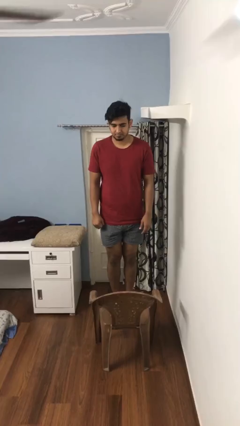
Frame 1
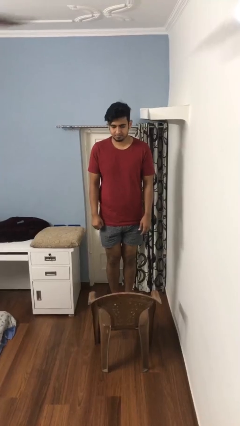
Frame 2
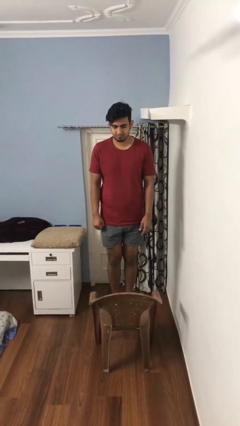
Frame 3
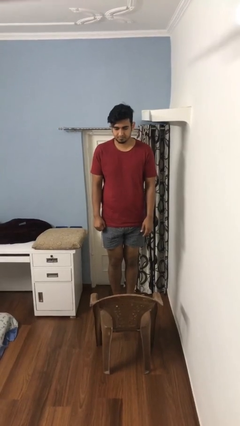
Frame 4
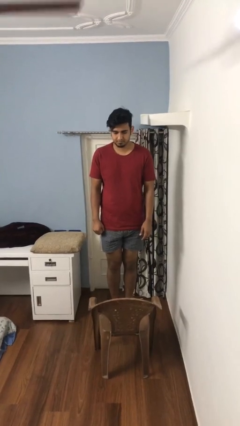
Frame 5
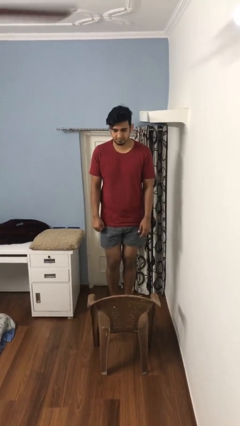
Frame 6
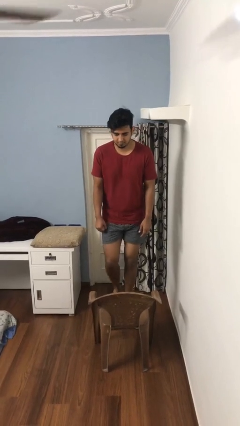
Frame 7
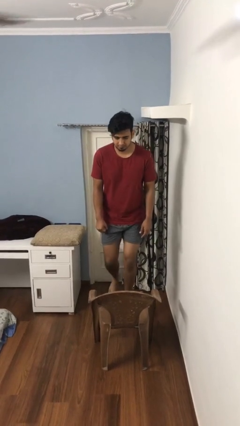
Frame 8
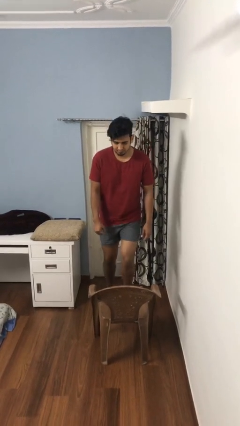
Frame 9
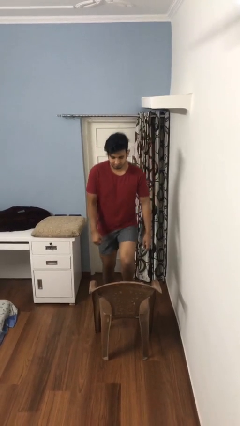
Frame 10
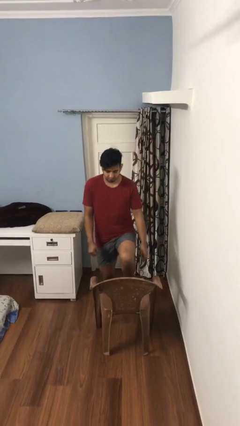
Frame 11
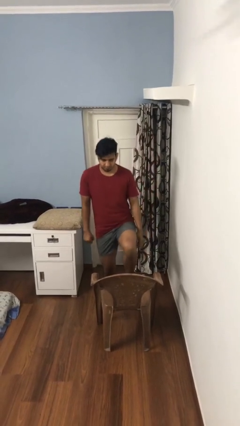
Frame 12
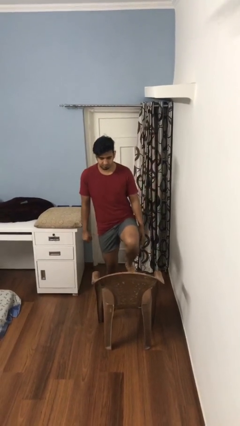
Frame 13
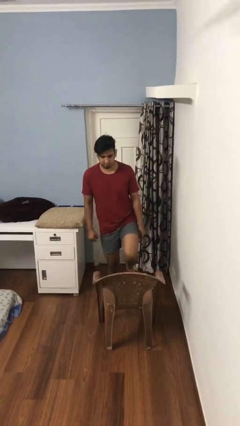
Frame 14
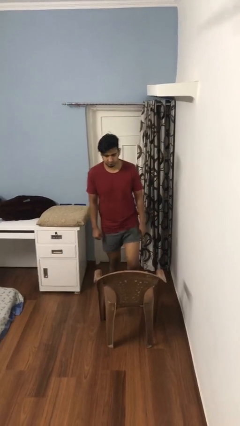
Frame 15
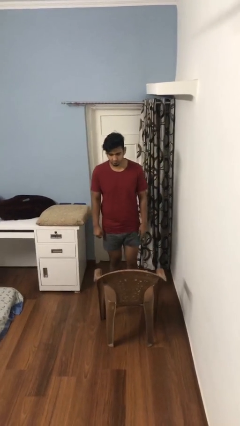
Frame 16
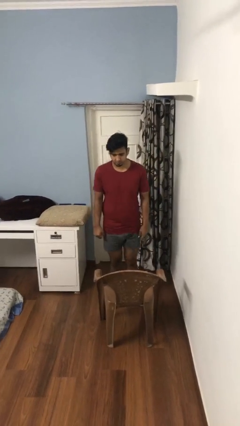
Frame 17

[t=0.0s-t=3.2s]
person climbs off chair

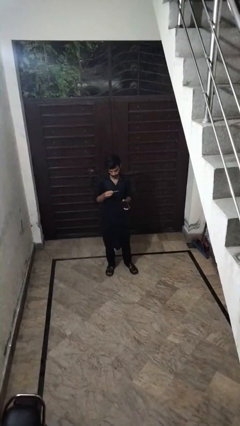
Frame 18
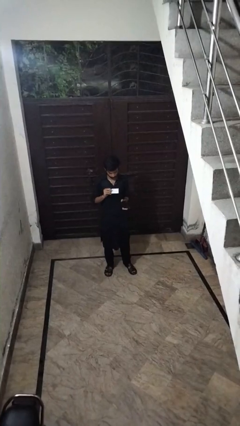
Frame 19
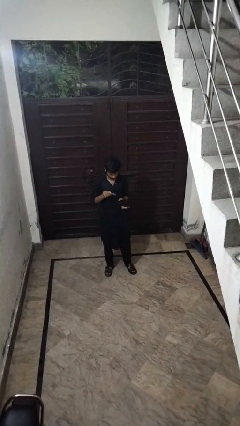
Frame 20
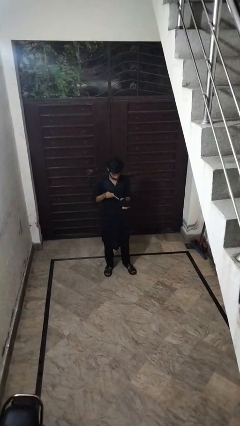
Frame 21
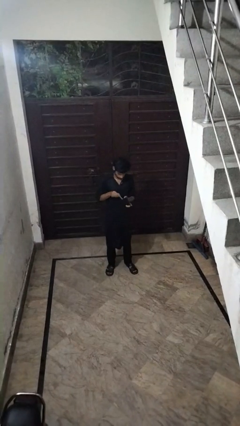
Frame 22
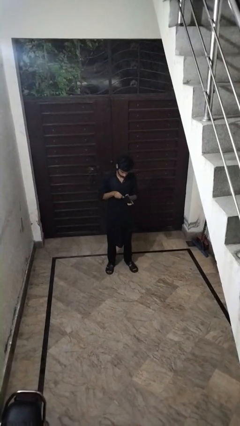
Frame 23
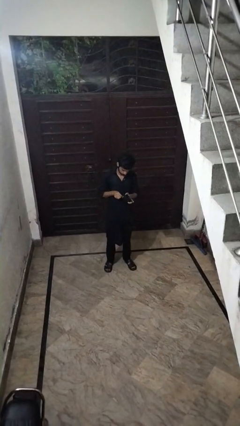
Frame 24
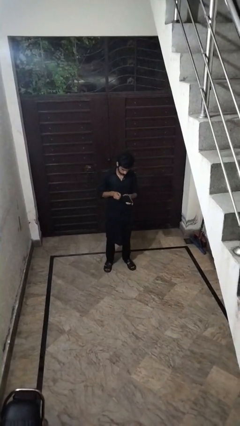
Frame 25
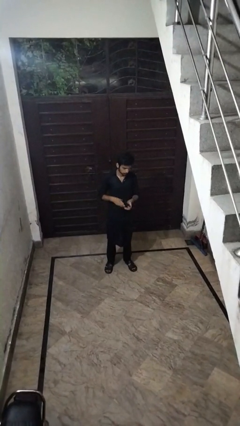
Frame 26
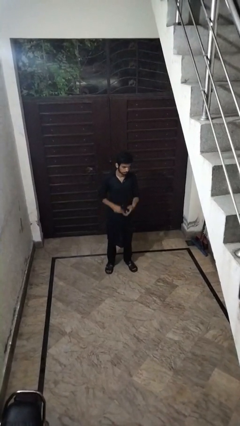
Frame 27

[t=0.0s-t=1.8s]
person puts object into purse

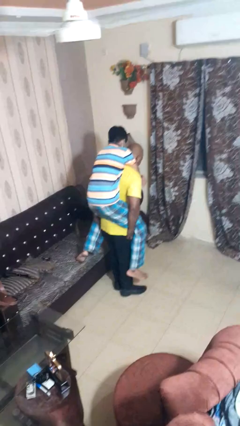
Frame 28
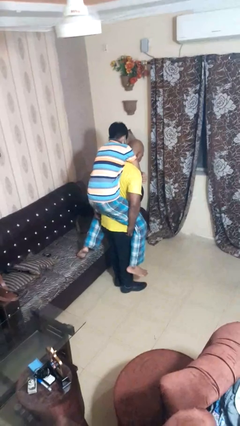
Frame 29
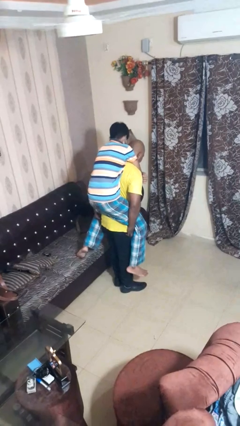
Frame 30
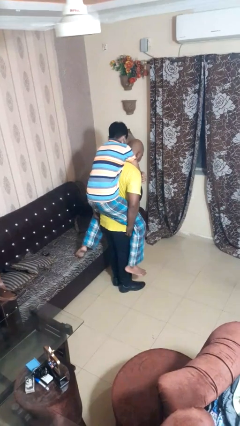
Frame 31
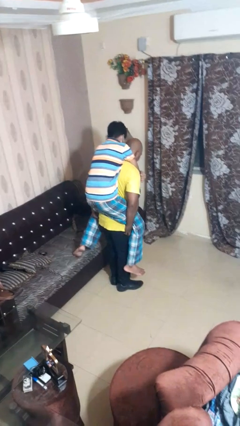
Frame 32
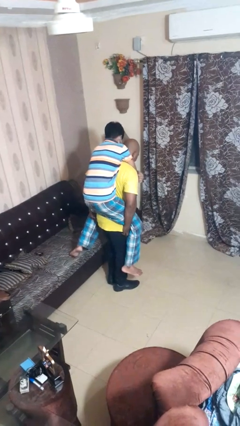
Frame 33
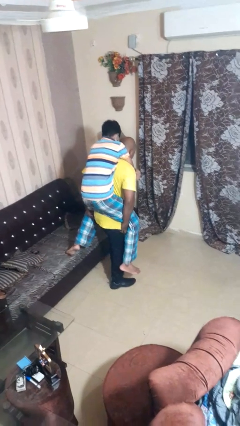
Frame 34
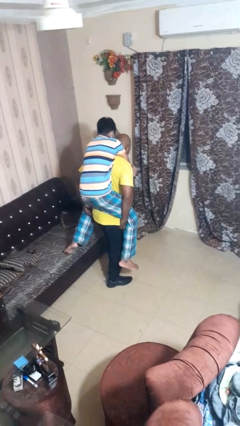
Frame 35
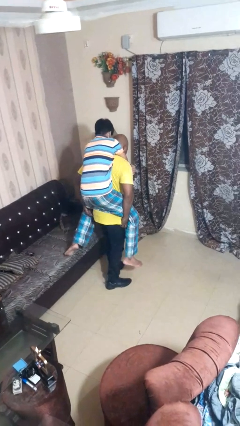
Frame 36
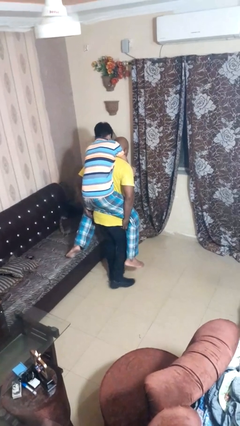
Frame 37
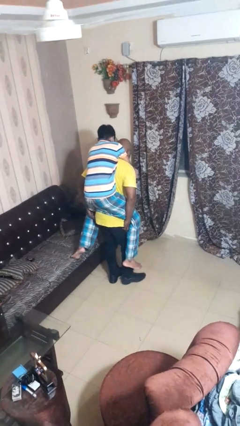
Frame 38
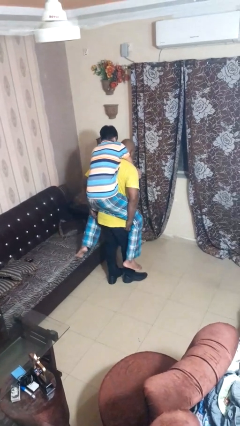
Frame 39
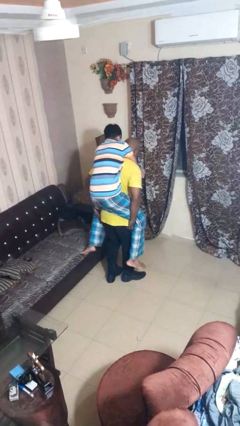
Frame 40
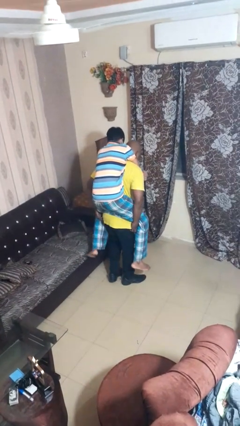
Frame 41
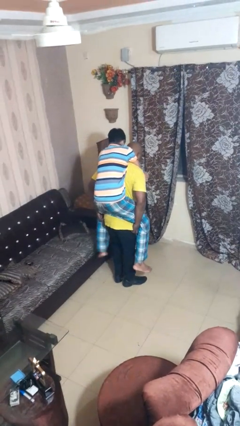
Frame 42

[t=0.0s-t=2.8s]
person carries person on back

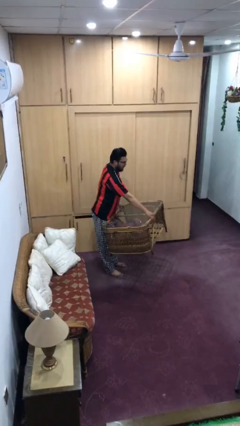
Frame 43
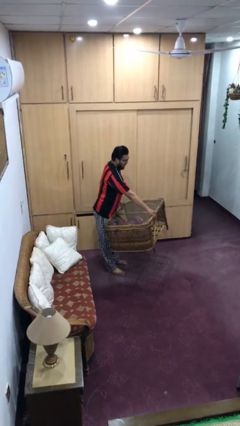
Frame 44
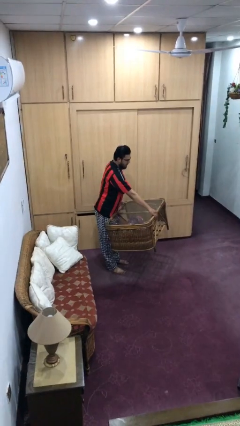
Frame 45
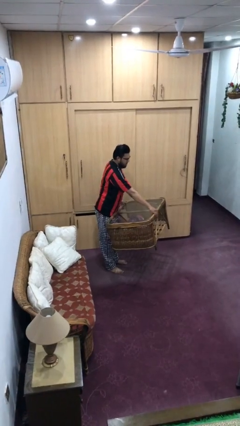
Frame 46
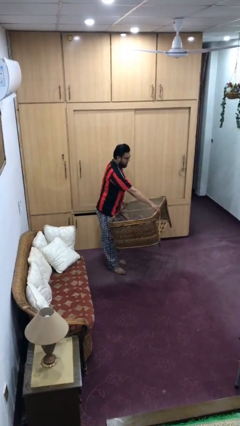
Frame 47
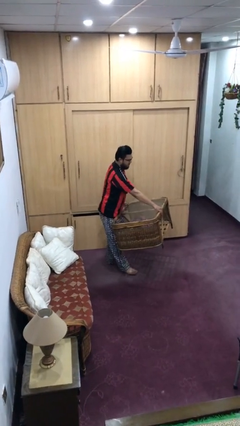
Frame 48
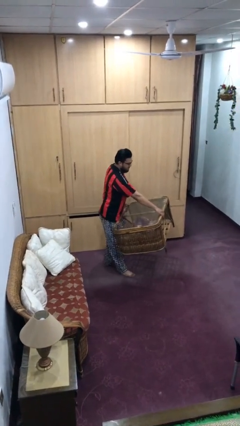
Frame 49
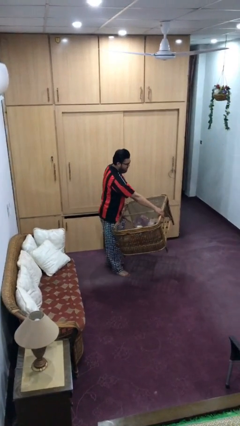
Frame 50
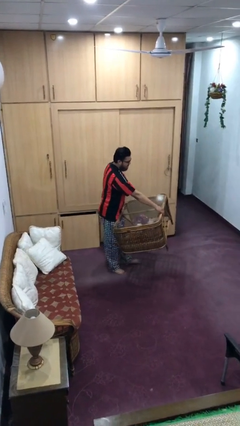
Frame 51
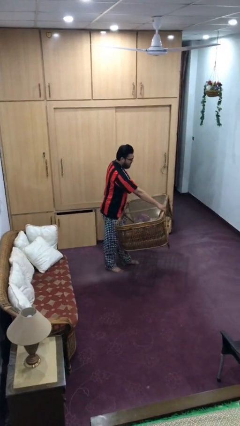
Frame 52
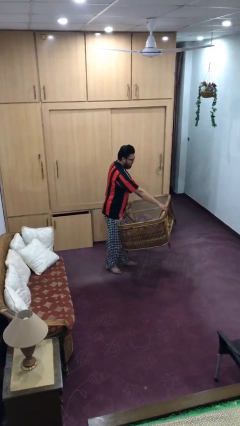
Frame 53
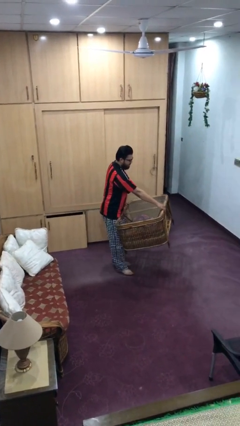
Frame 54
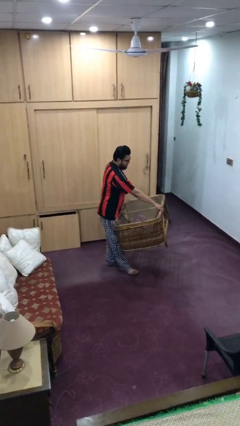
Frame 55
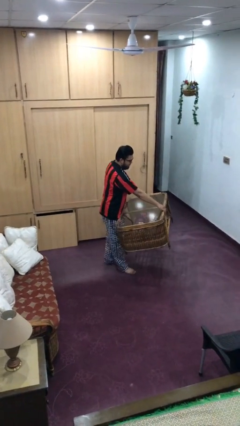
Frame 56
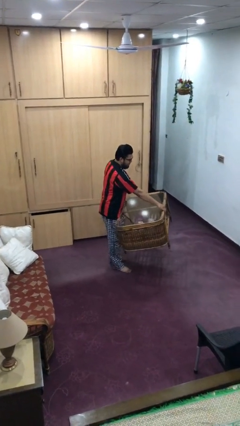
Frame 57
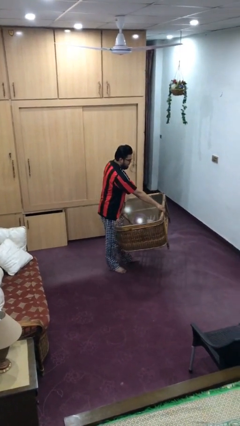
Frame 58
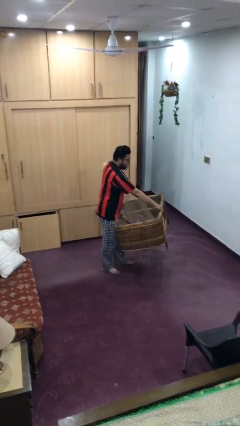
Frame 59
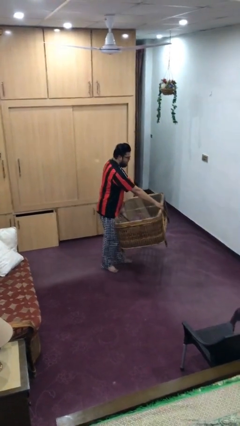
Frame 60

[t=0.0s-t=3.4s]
person carries heavy object

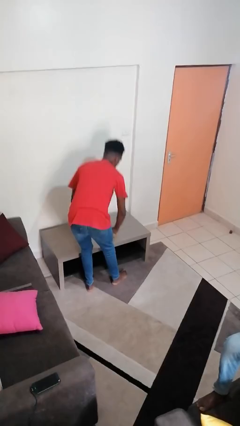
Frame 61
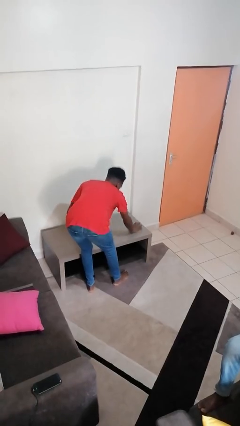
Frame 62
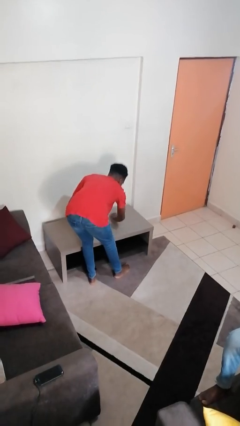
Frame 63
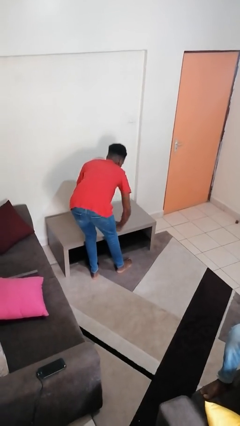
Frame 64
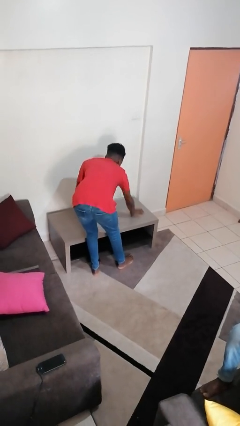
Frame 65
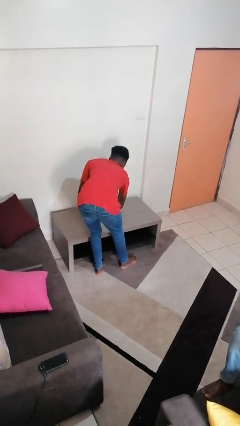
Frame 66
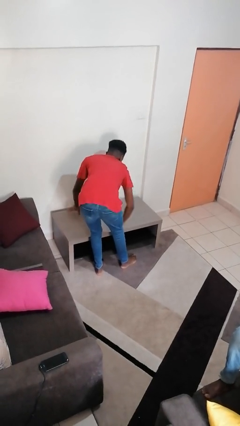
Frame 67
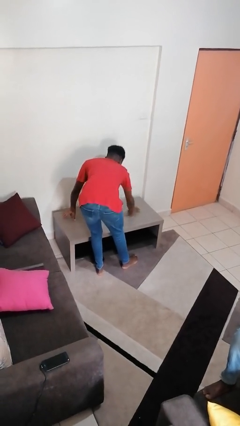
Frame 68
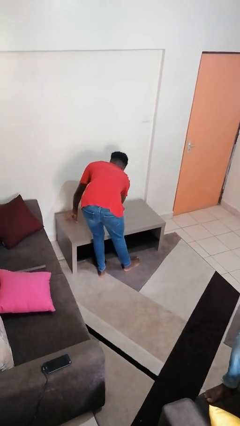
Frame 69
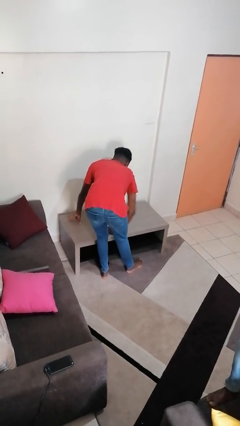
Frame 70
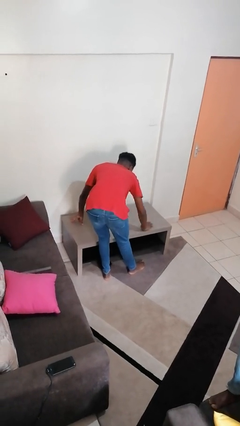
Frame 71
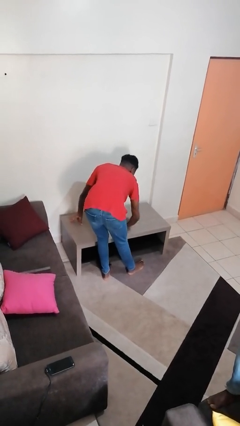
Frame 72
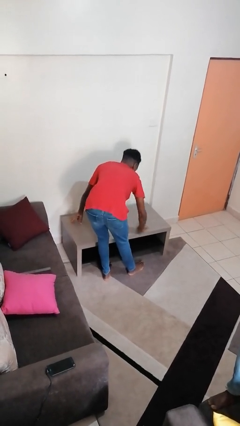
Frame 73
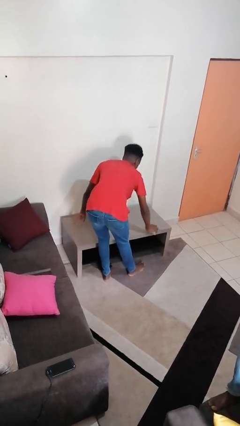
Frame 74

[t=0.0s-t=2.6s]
person cleans table with rag

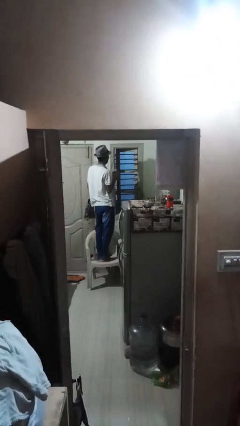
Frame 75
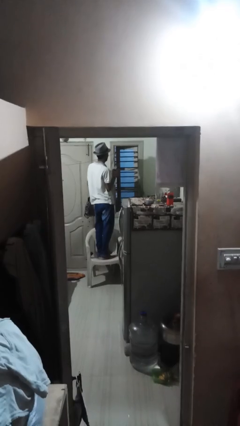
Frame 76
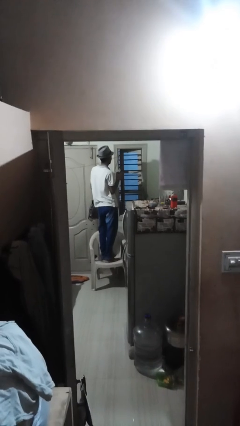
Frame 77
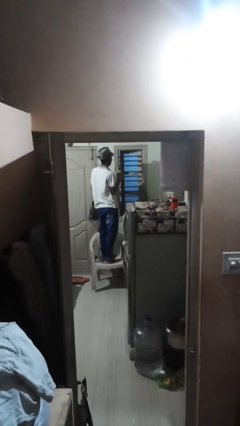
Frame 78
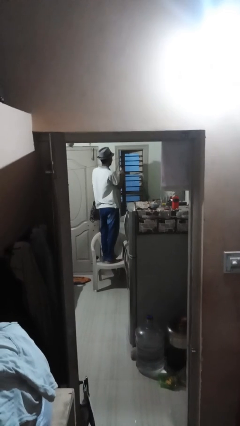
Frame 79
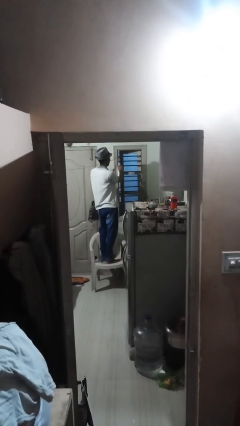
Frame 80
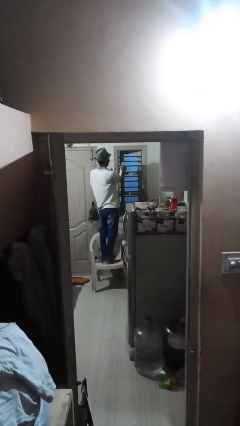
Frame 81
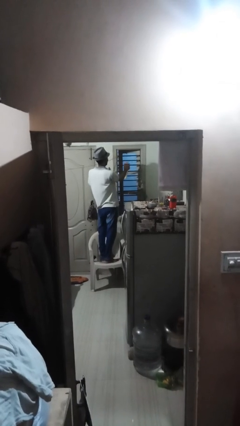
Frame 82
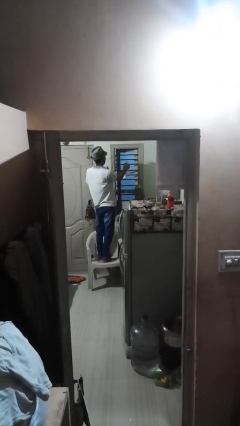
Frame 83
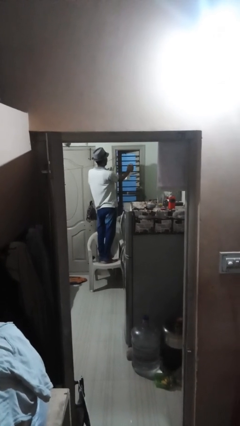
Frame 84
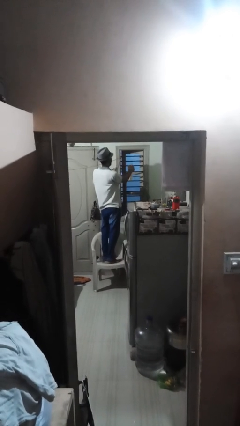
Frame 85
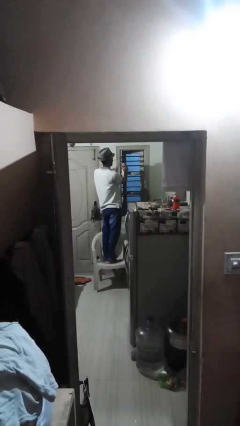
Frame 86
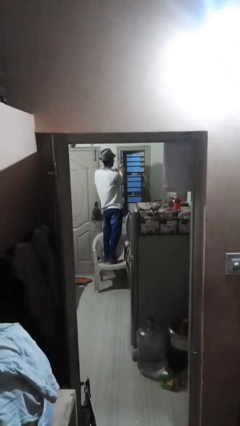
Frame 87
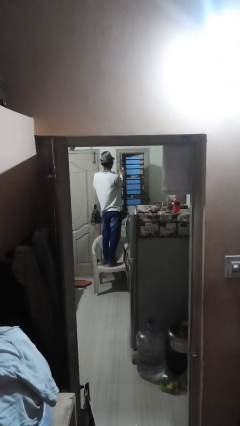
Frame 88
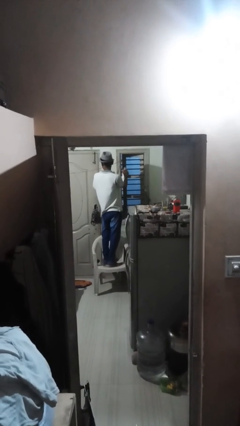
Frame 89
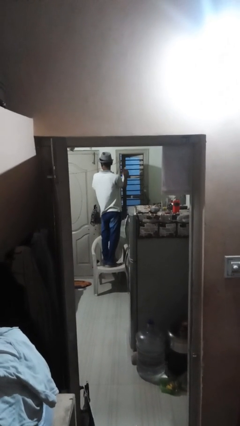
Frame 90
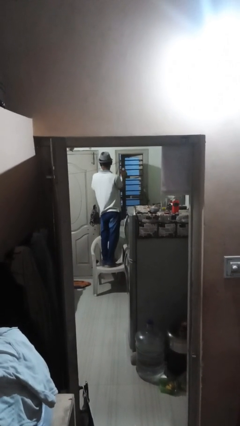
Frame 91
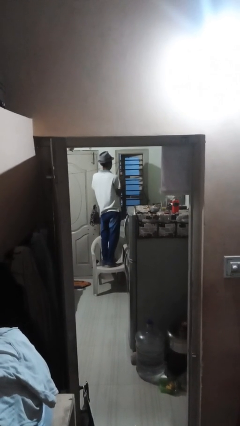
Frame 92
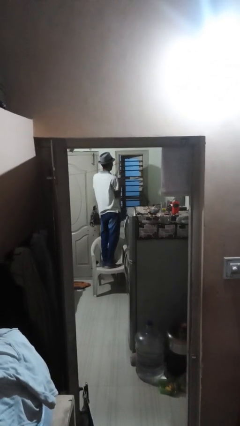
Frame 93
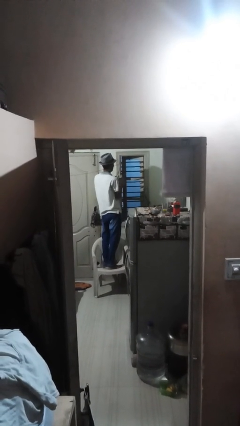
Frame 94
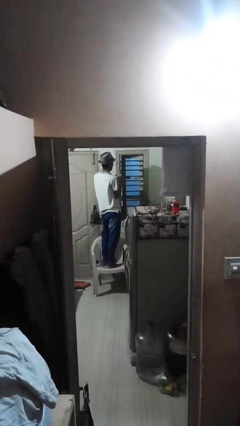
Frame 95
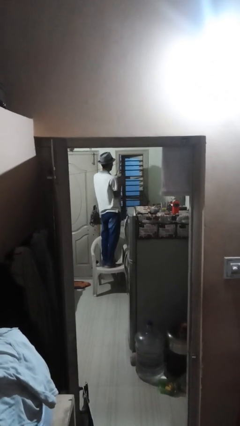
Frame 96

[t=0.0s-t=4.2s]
person sprays from bottle
